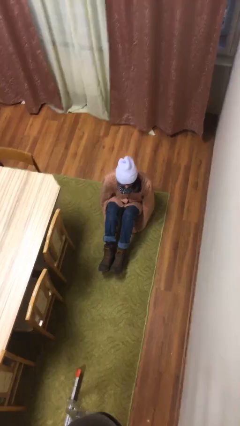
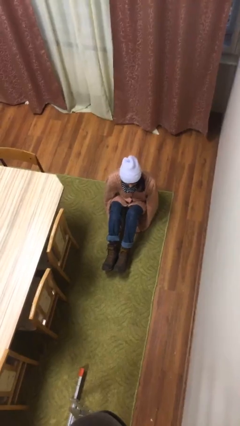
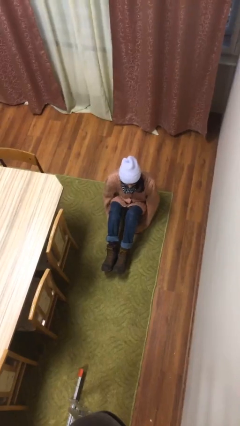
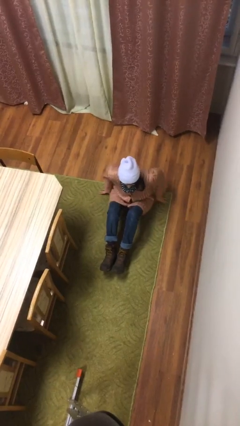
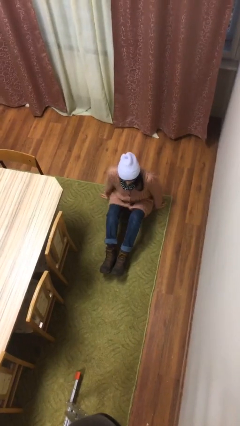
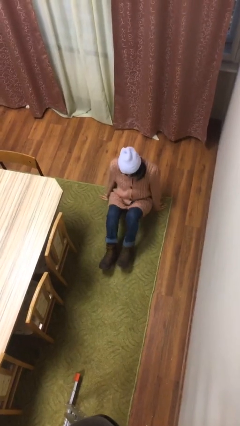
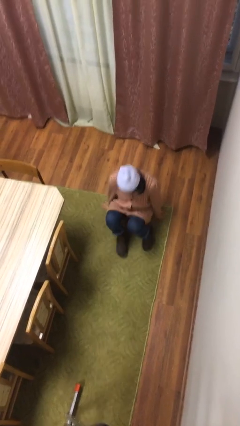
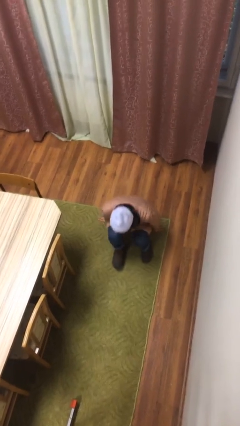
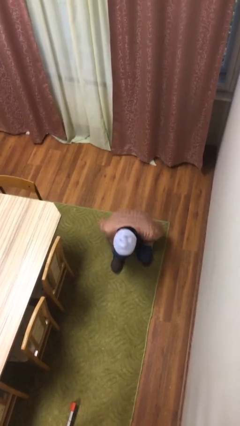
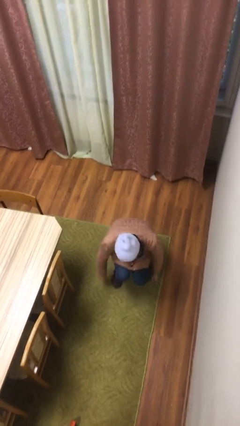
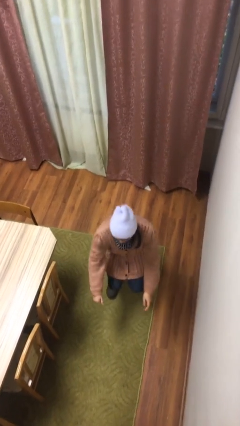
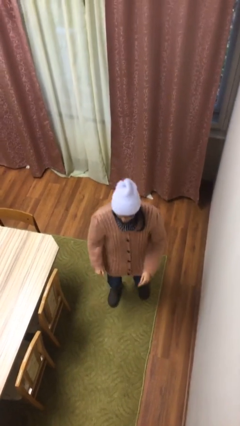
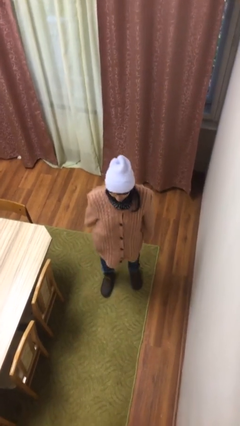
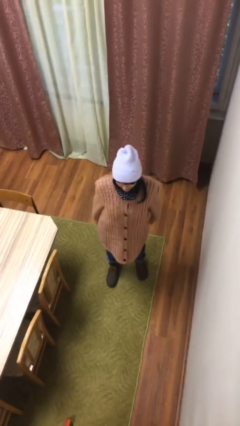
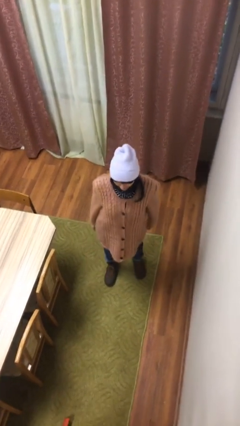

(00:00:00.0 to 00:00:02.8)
person stands up

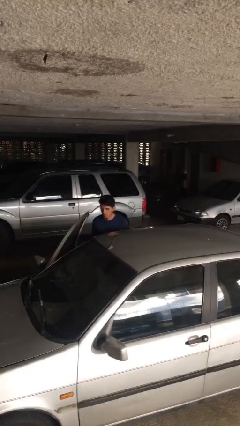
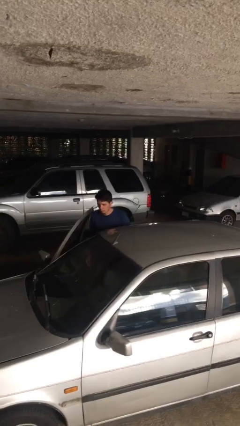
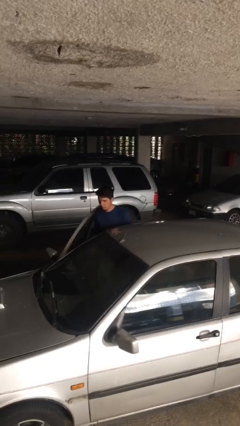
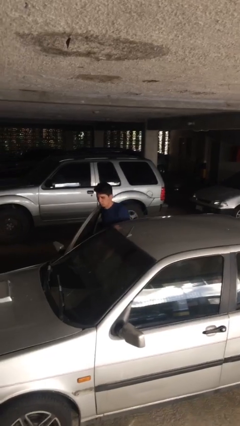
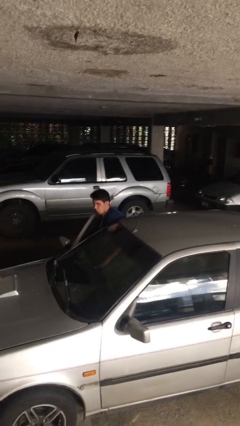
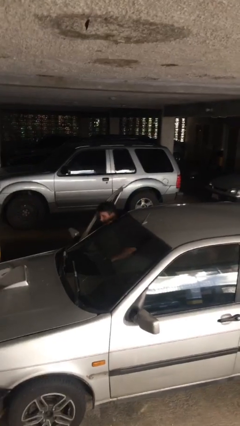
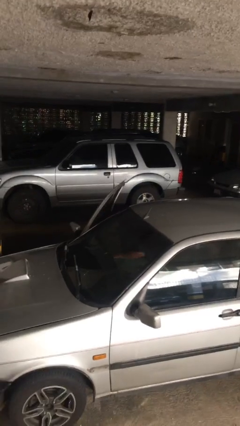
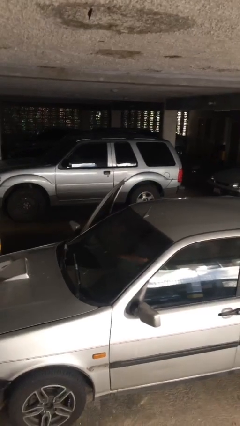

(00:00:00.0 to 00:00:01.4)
person enters car

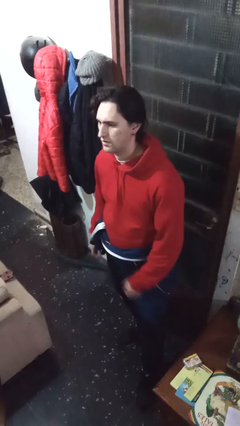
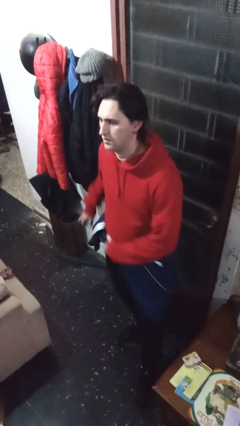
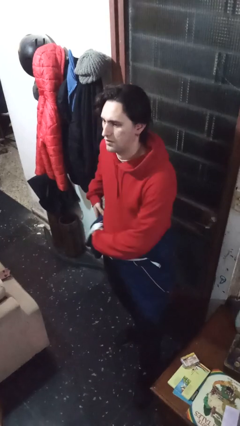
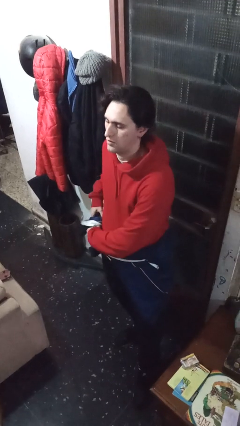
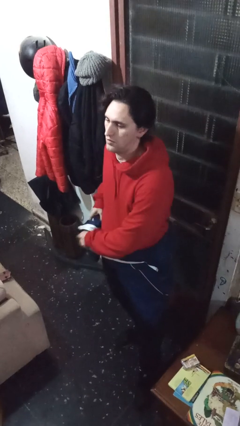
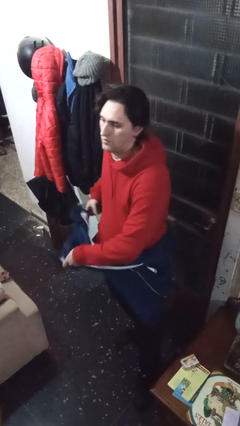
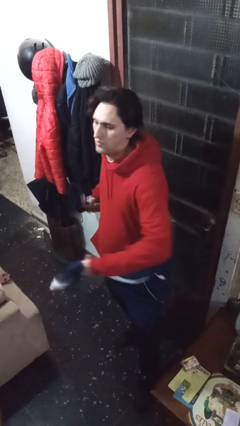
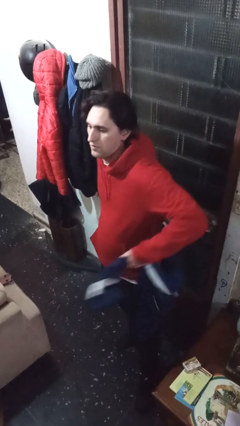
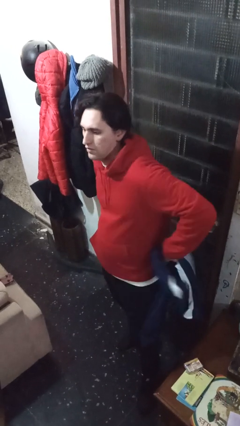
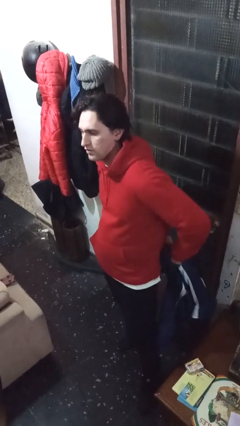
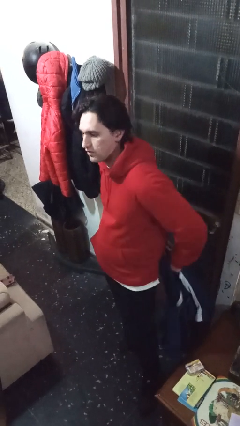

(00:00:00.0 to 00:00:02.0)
person unties jacket around waist

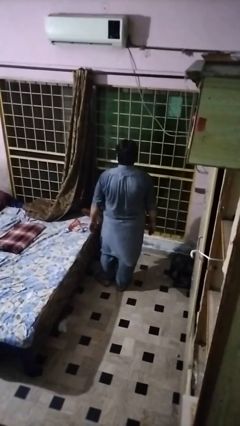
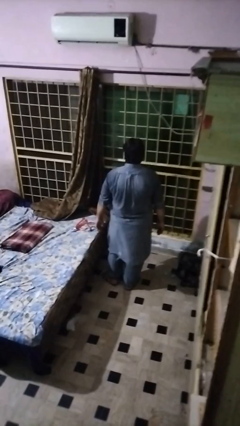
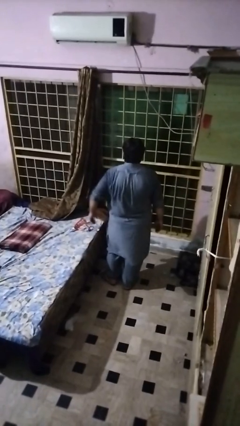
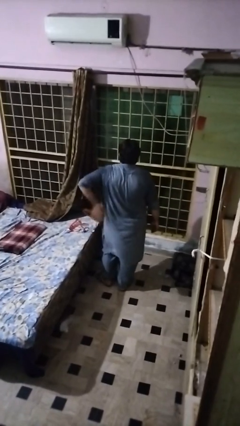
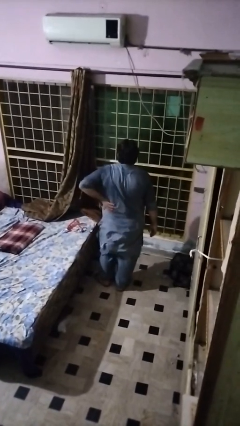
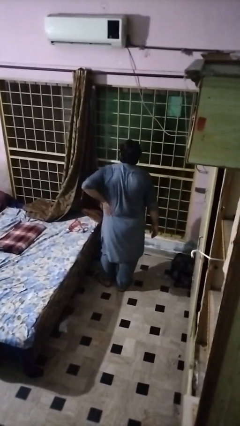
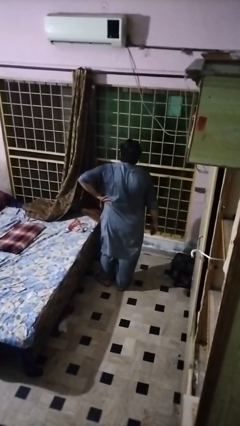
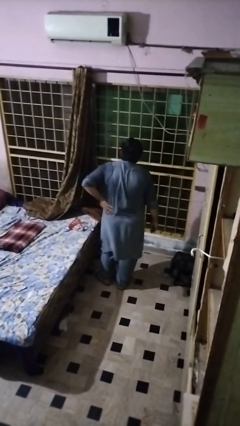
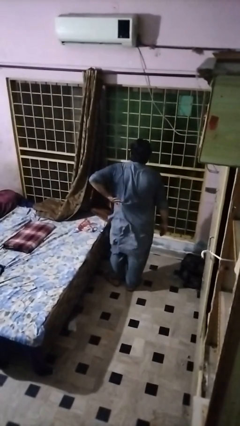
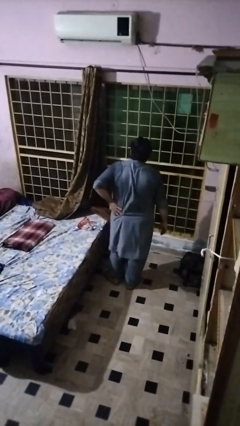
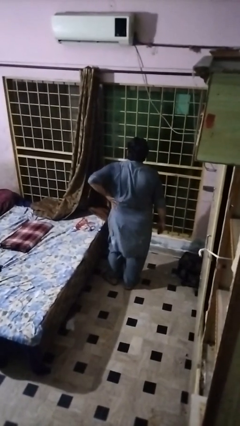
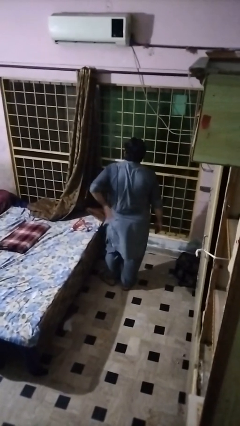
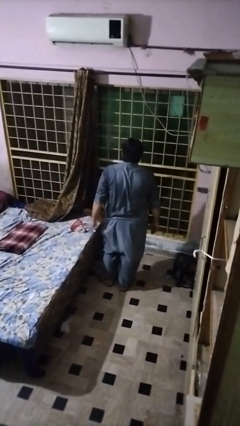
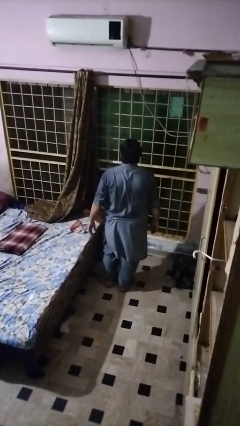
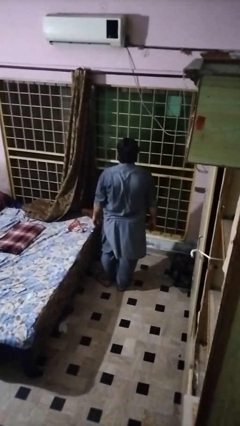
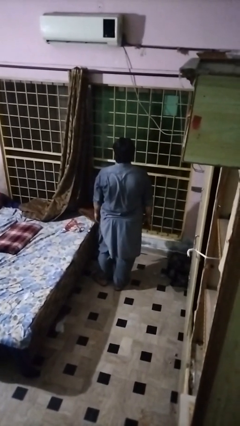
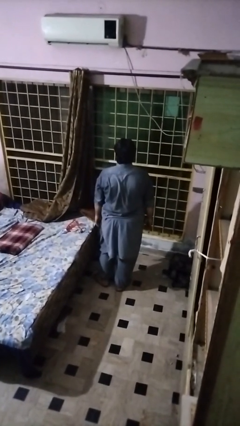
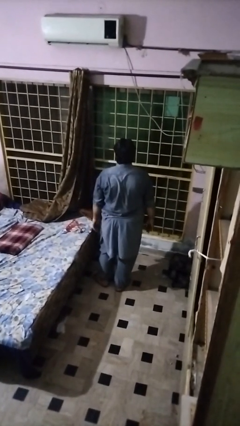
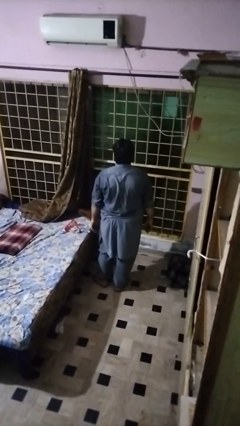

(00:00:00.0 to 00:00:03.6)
person swats bug

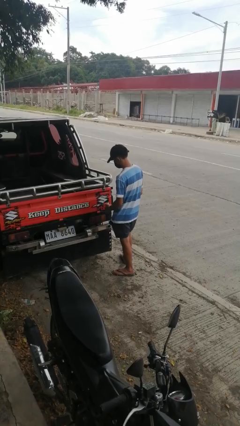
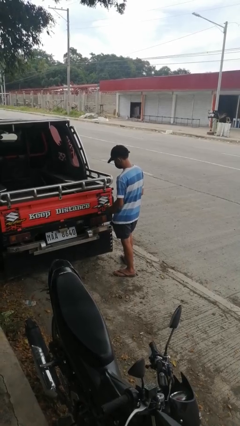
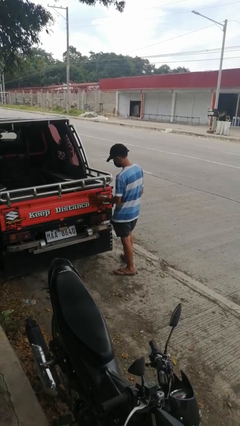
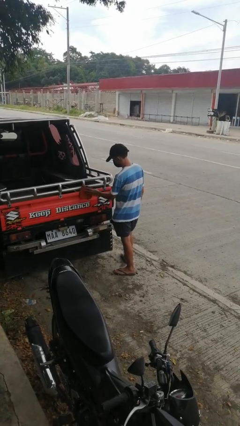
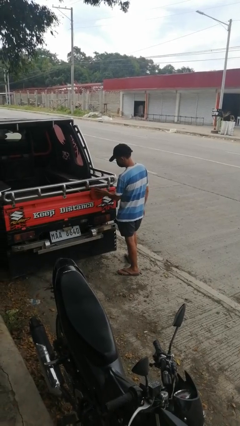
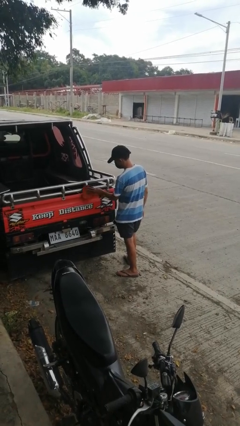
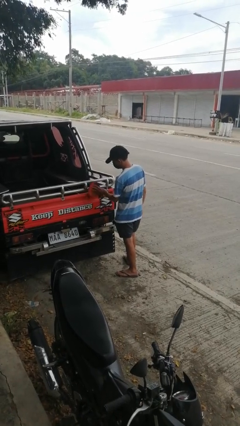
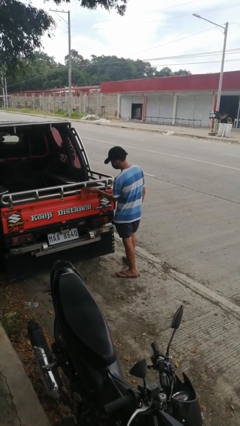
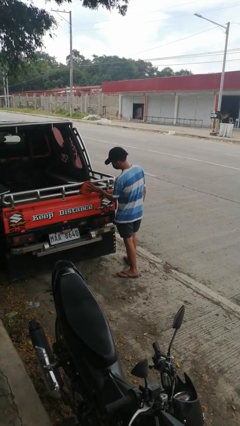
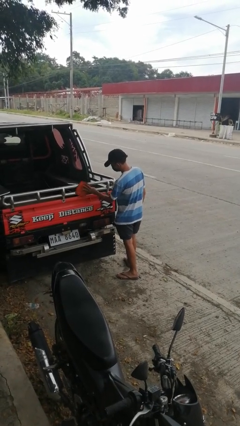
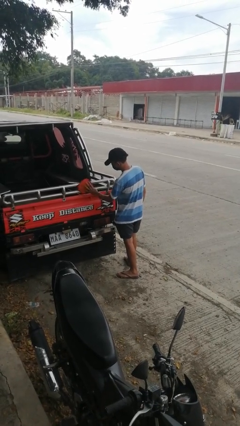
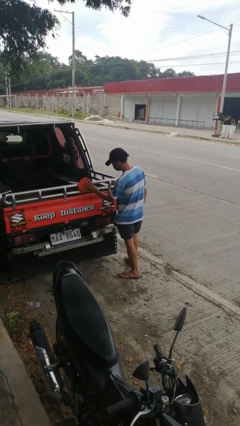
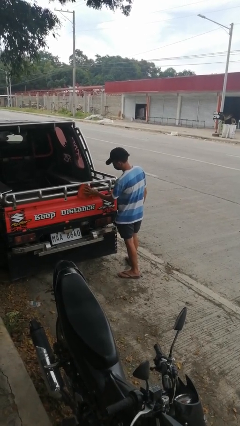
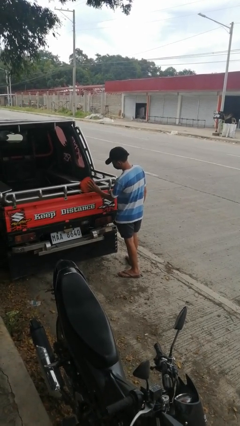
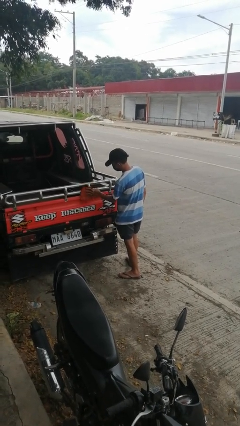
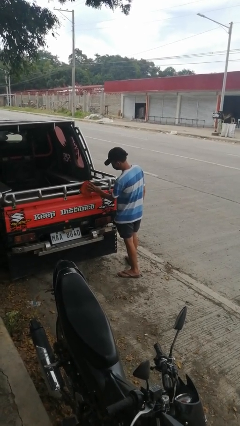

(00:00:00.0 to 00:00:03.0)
person polishes car with rag

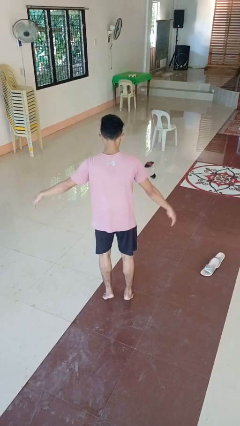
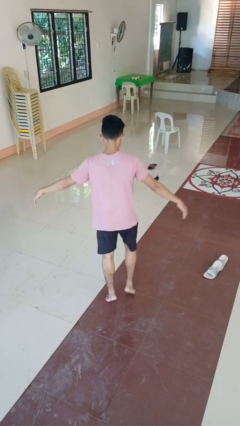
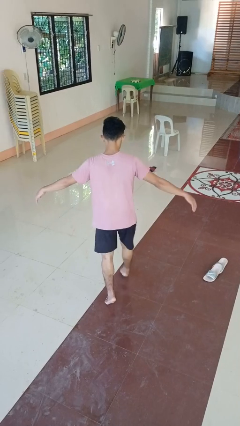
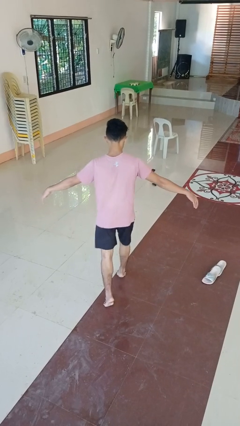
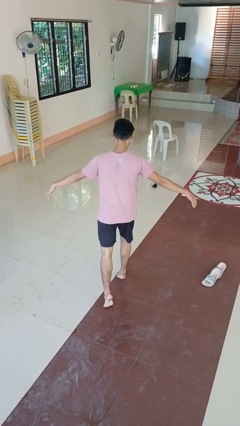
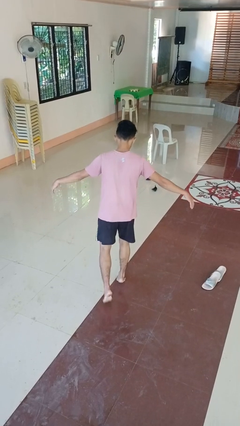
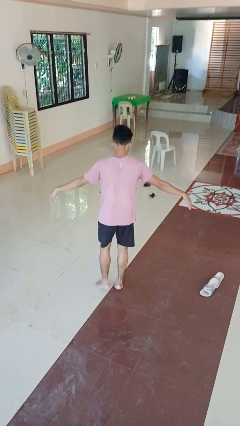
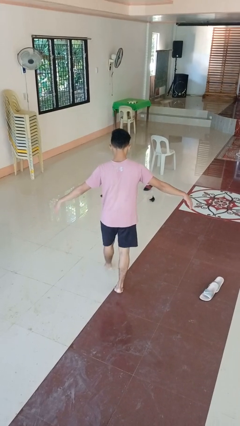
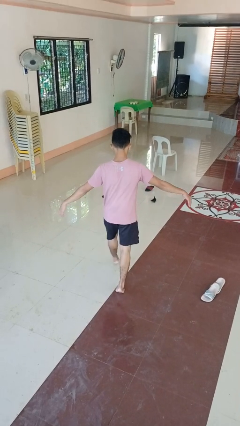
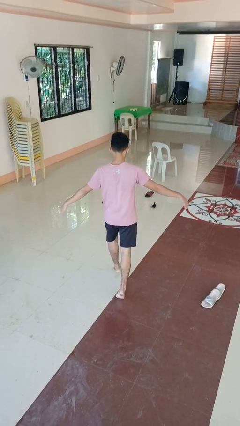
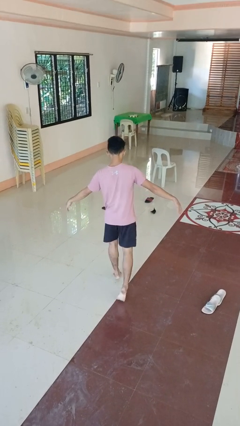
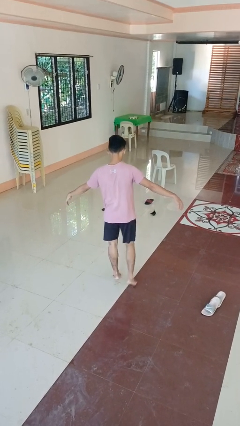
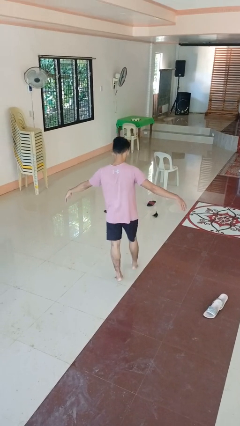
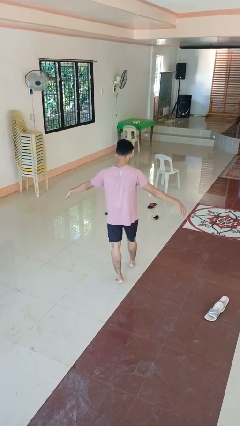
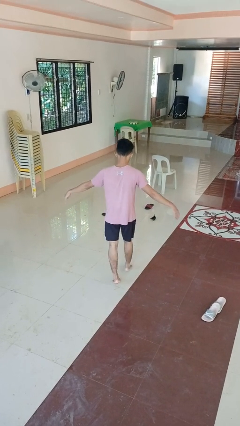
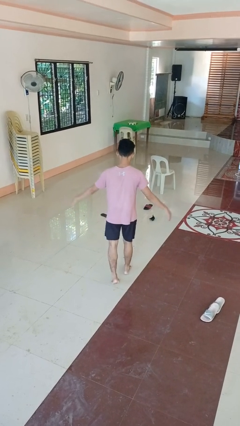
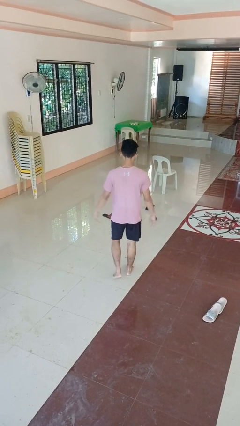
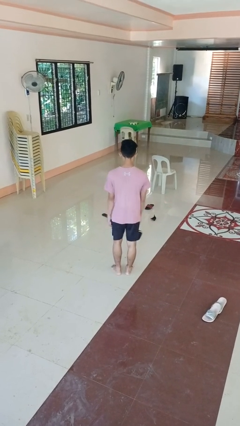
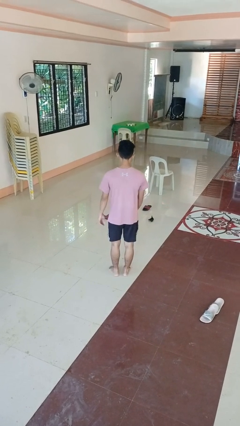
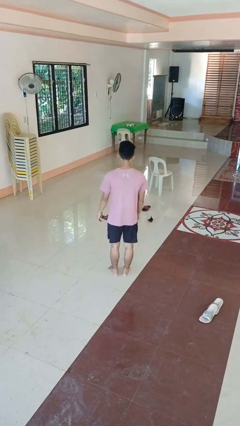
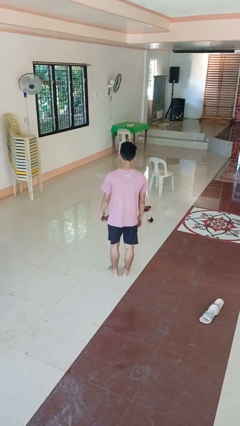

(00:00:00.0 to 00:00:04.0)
person walks tiptoe

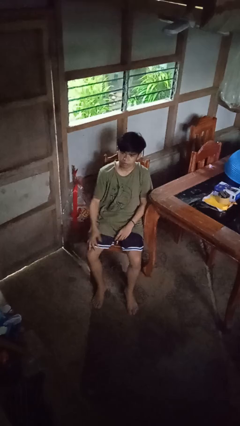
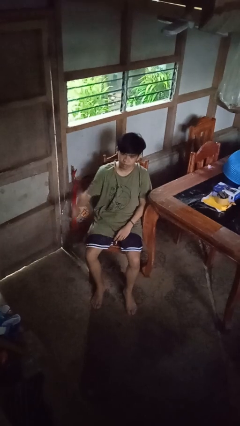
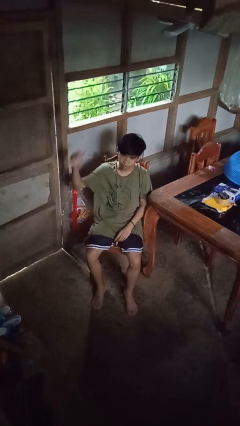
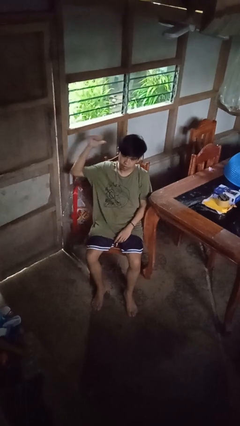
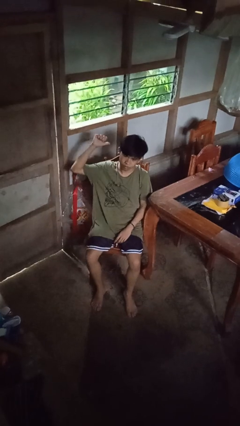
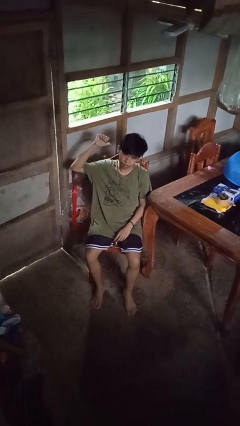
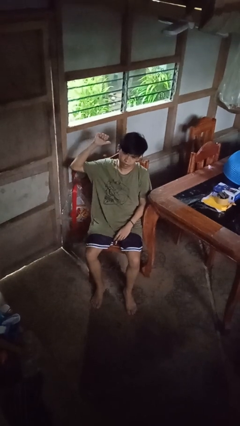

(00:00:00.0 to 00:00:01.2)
person gestures behind me
